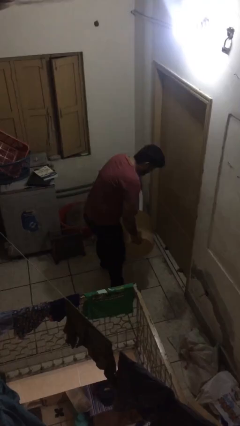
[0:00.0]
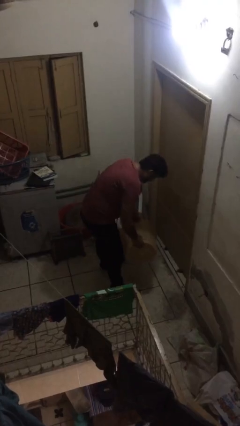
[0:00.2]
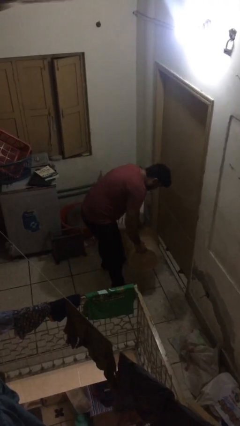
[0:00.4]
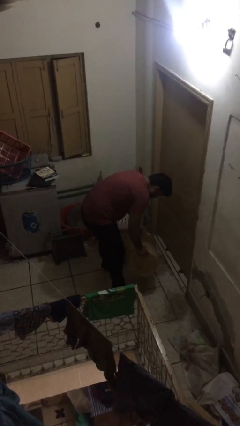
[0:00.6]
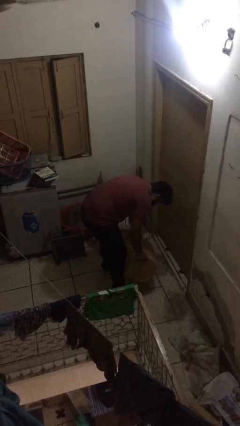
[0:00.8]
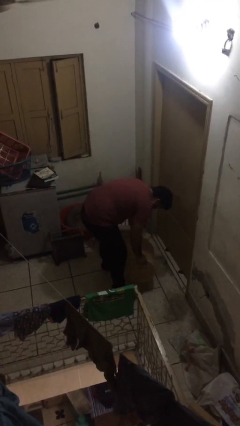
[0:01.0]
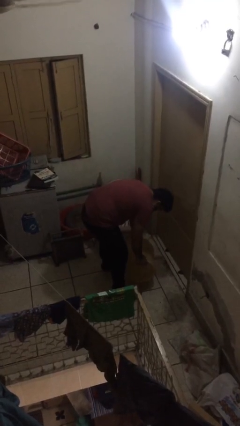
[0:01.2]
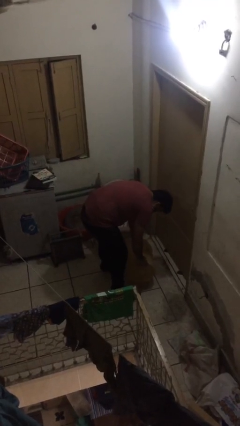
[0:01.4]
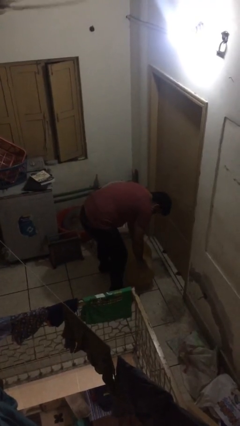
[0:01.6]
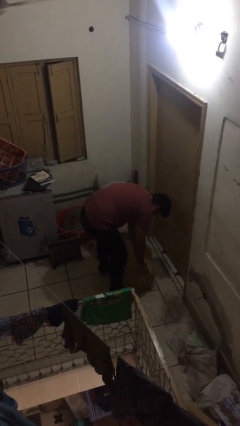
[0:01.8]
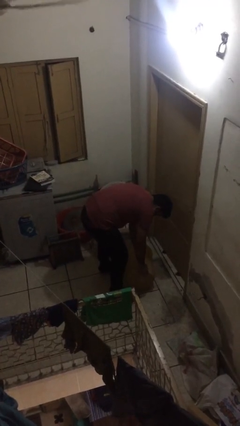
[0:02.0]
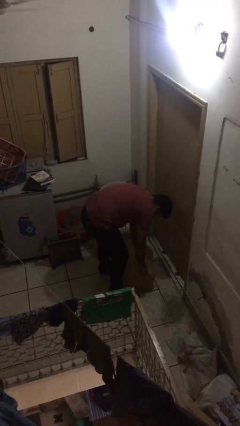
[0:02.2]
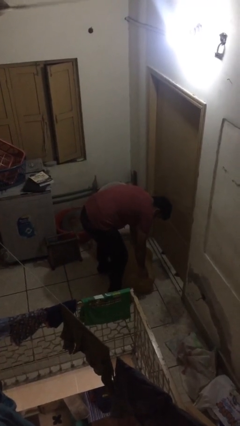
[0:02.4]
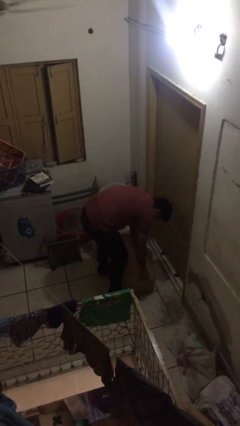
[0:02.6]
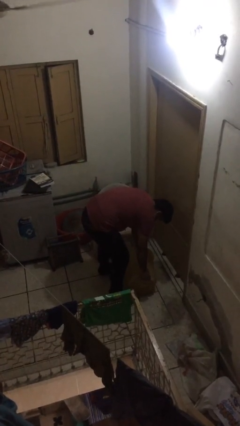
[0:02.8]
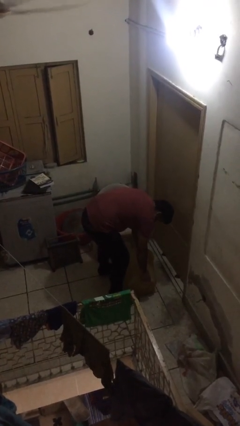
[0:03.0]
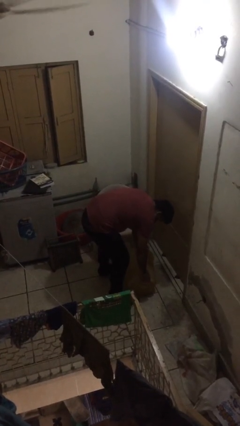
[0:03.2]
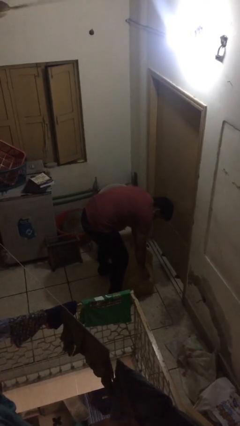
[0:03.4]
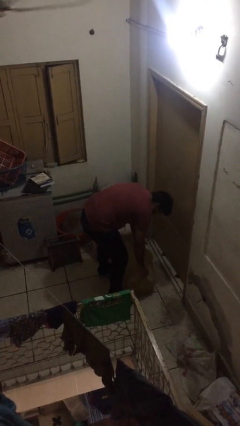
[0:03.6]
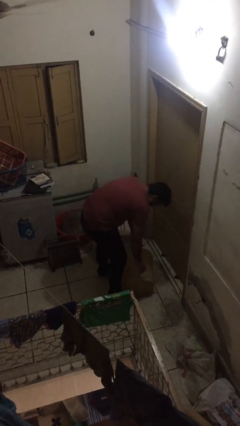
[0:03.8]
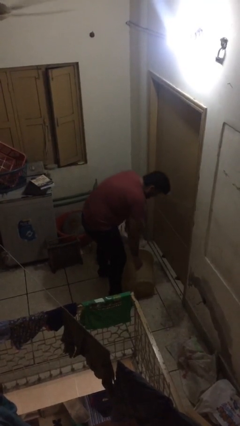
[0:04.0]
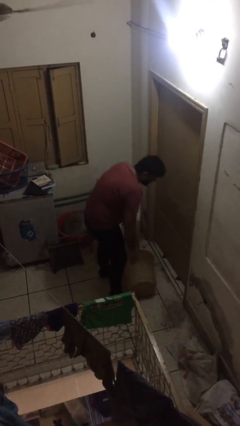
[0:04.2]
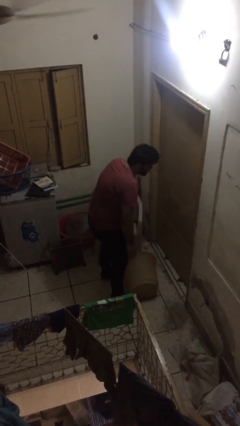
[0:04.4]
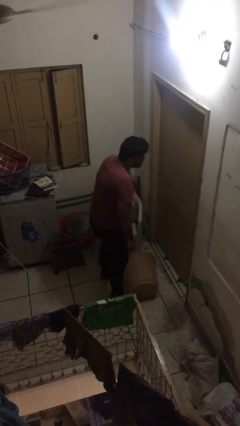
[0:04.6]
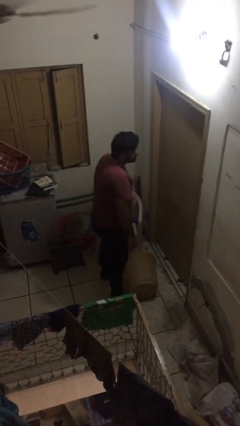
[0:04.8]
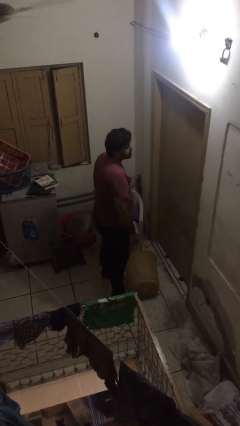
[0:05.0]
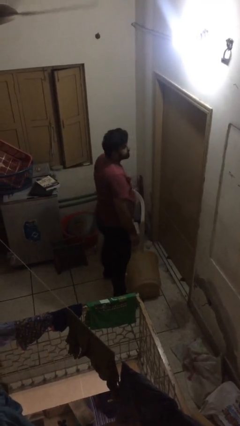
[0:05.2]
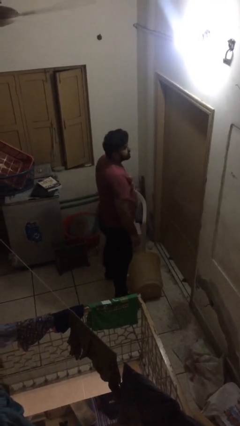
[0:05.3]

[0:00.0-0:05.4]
person puts down object on floor

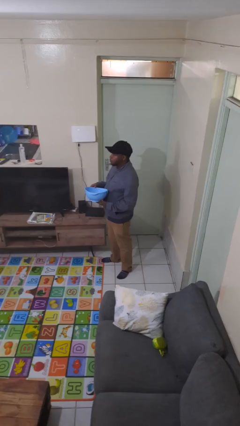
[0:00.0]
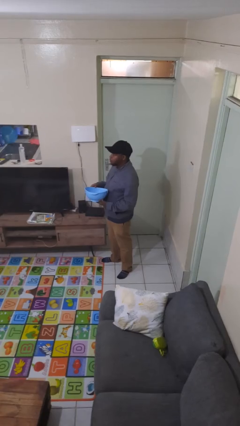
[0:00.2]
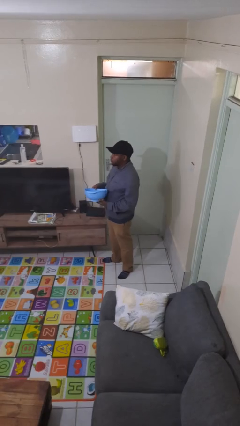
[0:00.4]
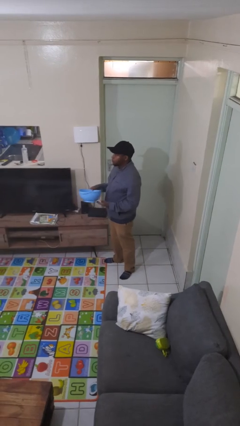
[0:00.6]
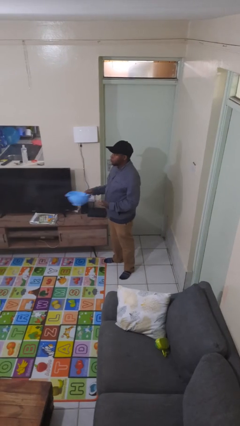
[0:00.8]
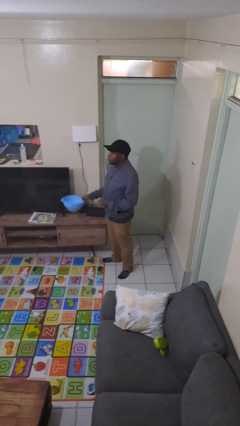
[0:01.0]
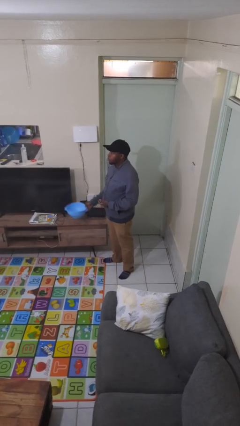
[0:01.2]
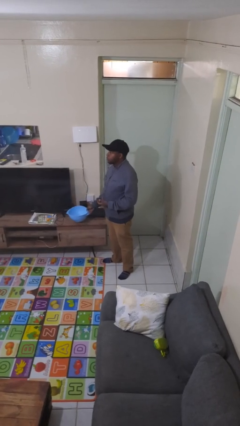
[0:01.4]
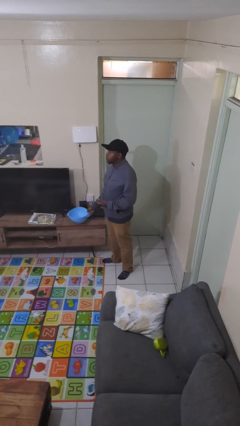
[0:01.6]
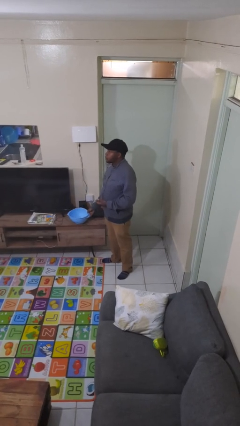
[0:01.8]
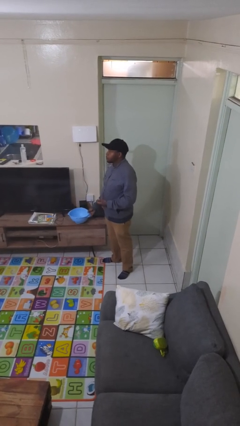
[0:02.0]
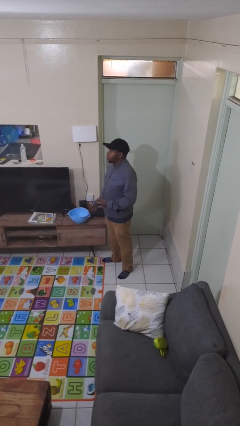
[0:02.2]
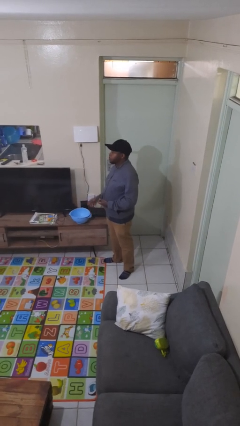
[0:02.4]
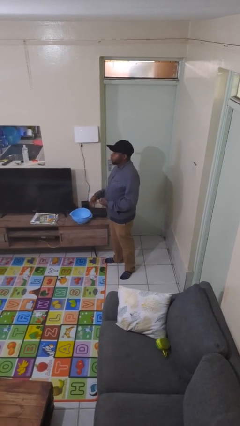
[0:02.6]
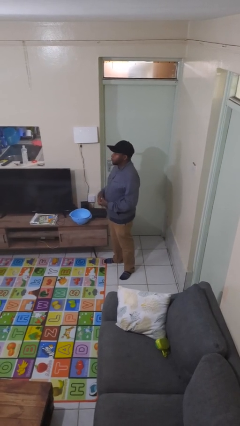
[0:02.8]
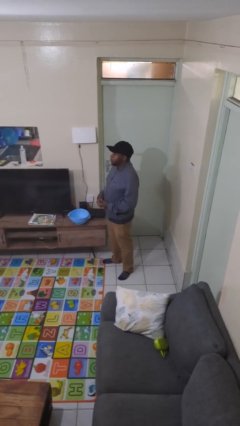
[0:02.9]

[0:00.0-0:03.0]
person puts down object on countertop

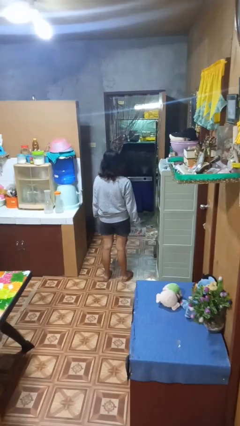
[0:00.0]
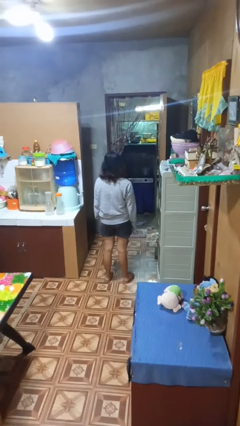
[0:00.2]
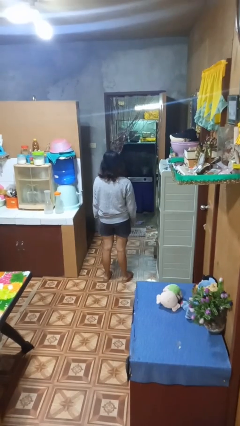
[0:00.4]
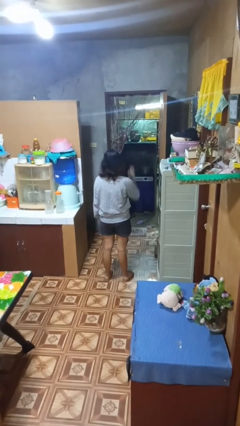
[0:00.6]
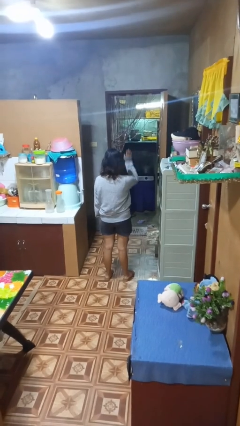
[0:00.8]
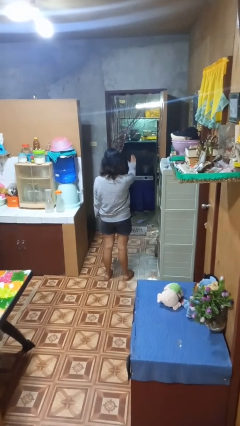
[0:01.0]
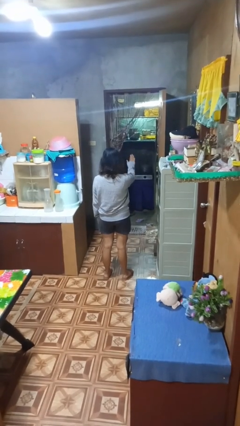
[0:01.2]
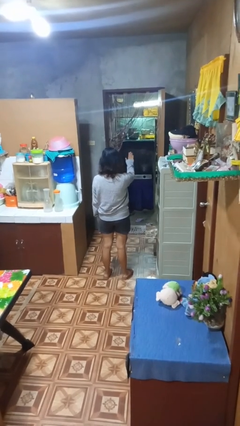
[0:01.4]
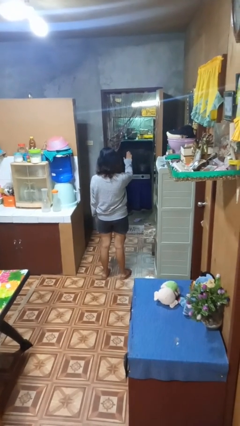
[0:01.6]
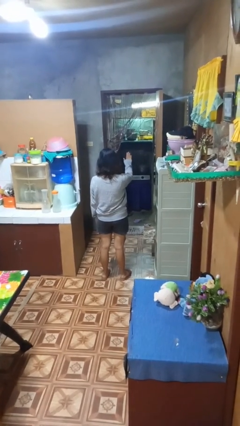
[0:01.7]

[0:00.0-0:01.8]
person gestures stop

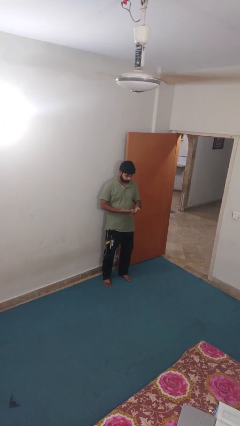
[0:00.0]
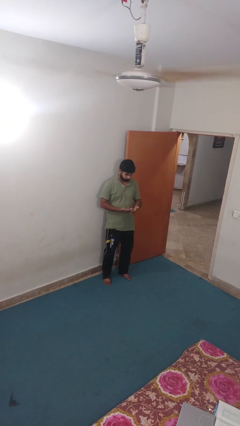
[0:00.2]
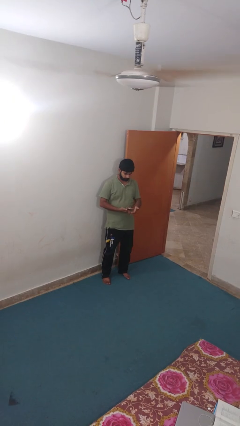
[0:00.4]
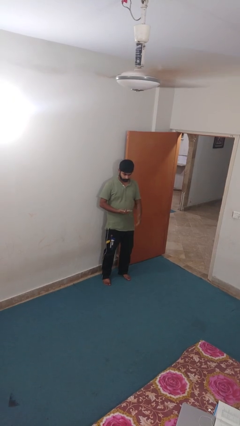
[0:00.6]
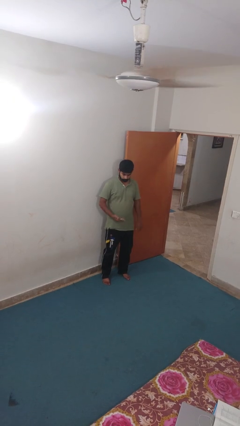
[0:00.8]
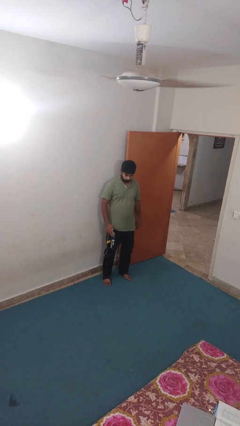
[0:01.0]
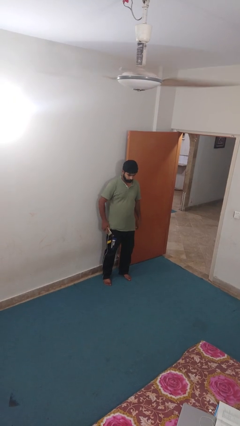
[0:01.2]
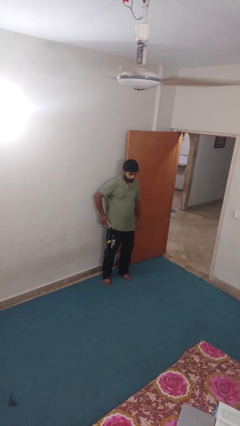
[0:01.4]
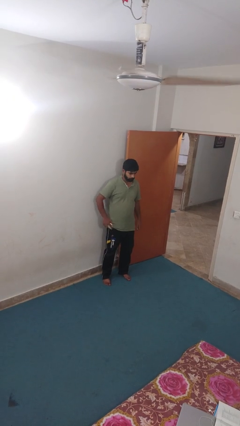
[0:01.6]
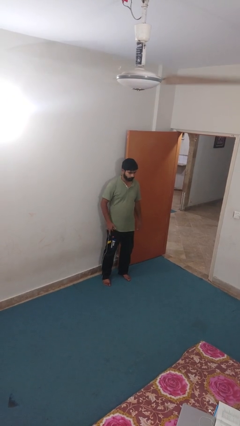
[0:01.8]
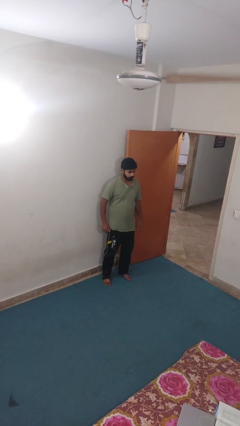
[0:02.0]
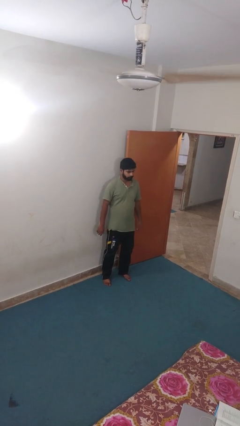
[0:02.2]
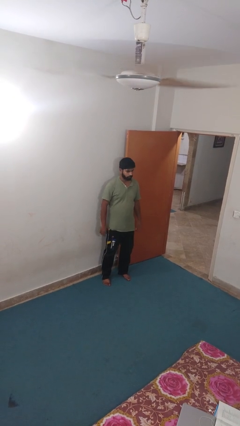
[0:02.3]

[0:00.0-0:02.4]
person puts phone into pocket

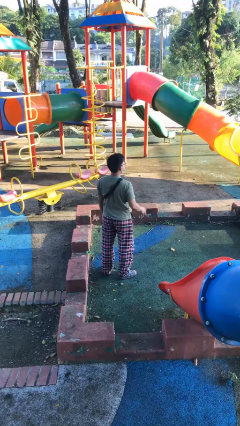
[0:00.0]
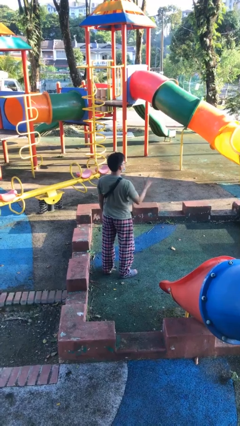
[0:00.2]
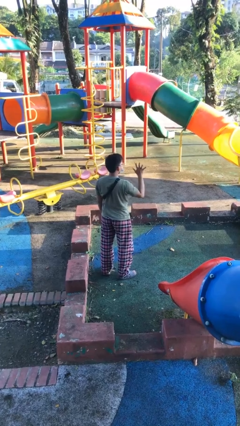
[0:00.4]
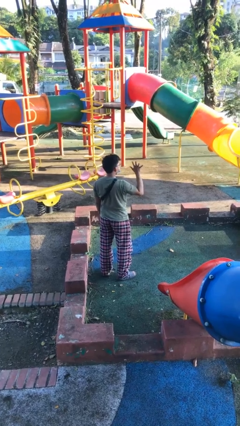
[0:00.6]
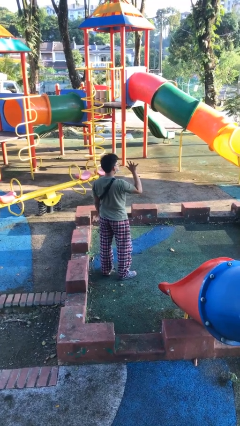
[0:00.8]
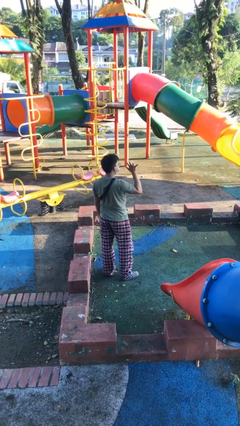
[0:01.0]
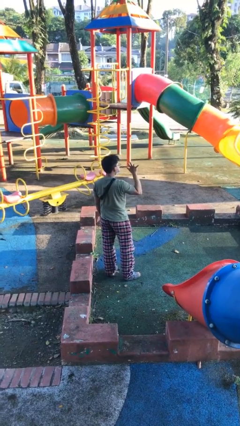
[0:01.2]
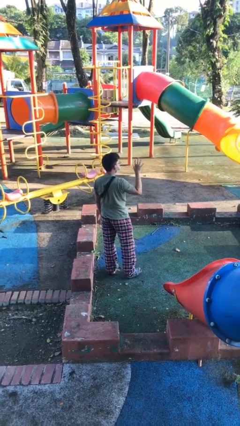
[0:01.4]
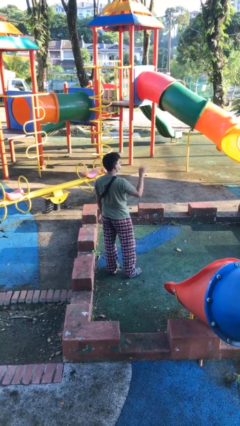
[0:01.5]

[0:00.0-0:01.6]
person gestures number five

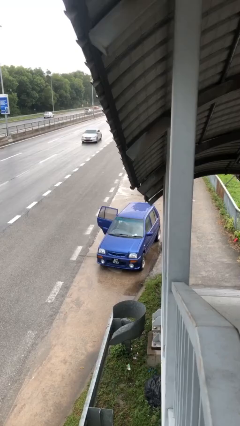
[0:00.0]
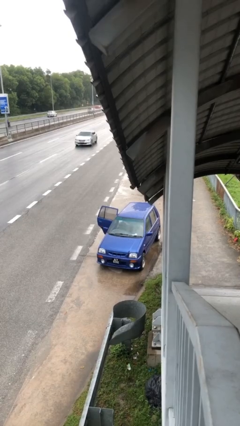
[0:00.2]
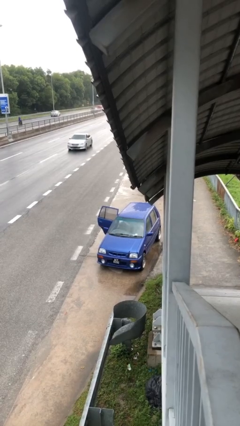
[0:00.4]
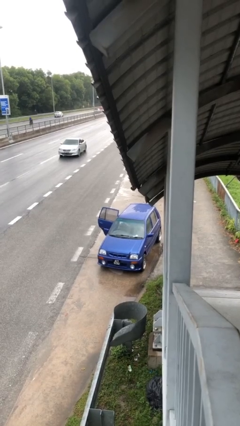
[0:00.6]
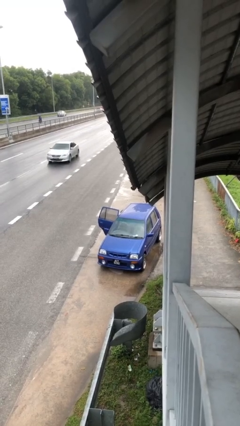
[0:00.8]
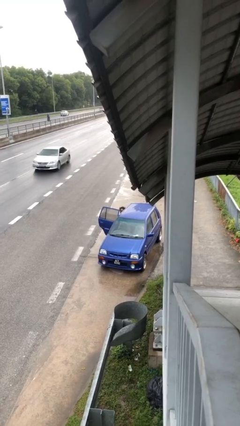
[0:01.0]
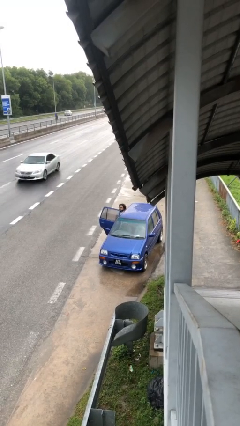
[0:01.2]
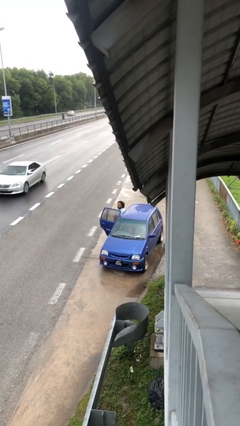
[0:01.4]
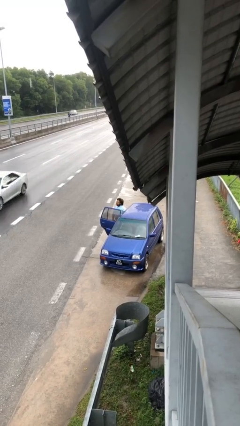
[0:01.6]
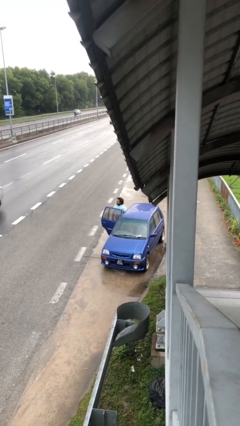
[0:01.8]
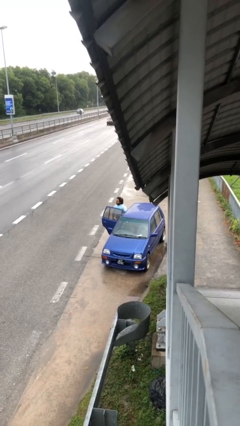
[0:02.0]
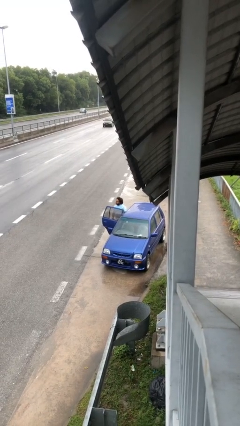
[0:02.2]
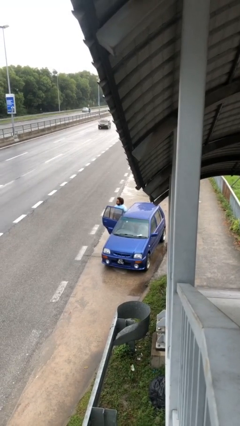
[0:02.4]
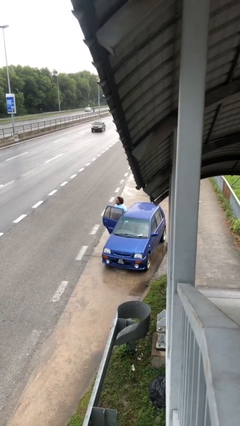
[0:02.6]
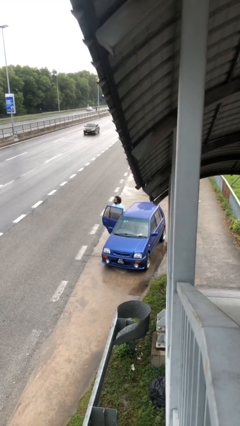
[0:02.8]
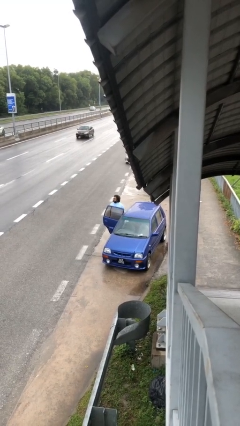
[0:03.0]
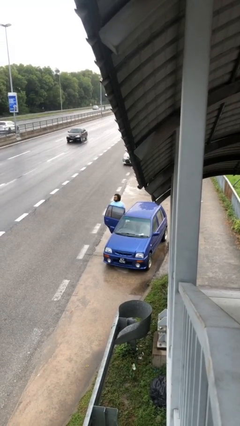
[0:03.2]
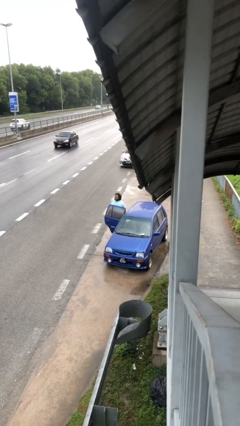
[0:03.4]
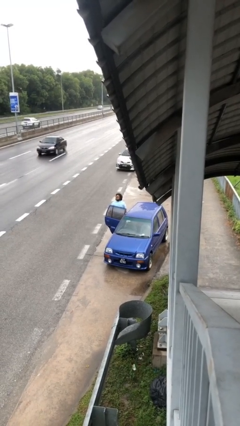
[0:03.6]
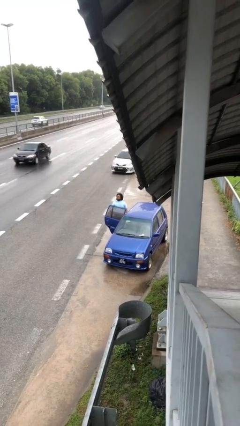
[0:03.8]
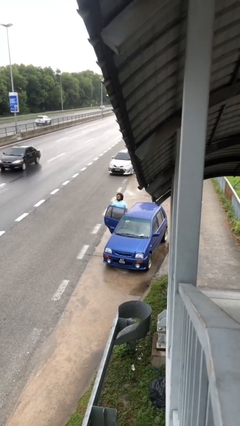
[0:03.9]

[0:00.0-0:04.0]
person exits car
